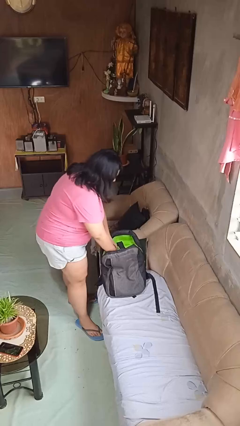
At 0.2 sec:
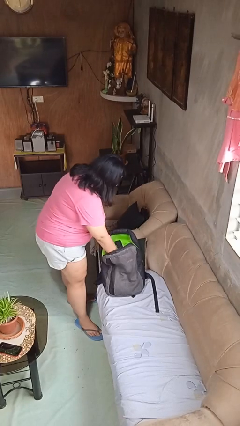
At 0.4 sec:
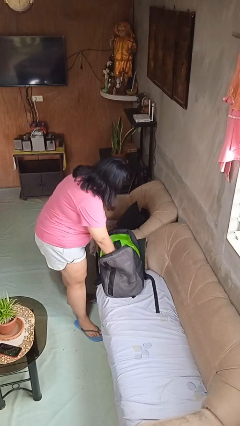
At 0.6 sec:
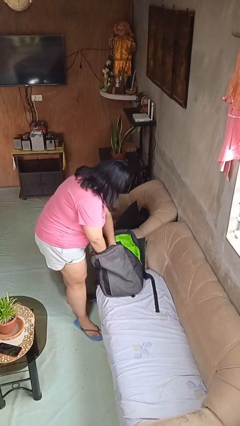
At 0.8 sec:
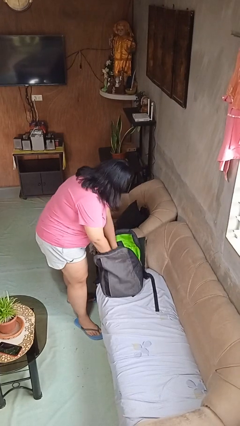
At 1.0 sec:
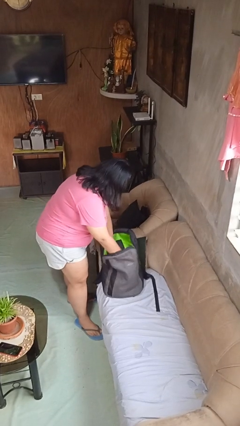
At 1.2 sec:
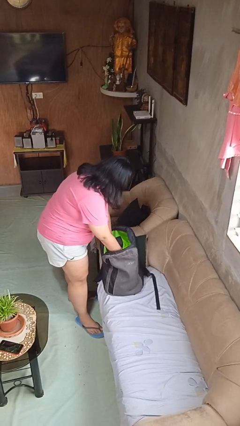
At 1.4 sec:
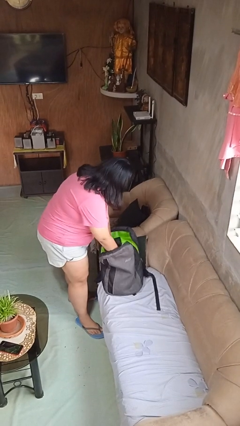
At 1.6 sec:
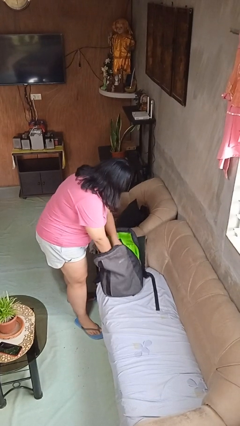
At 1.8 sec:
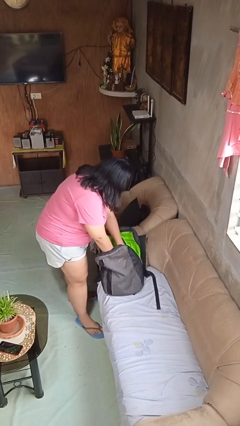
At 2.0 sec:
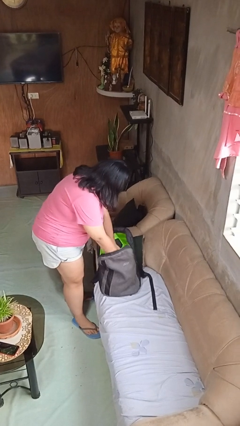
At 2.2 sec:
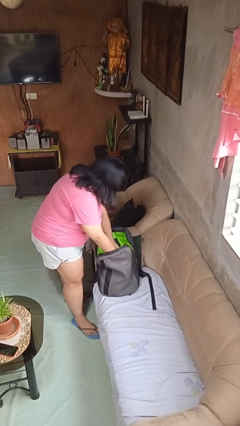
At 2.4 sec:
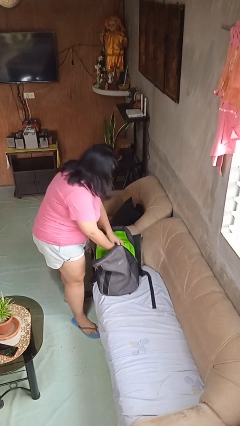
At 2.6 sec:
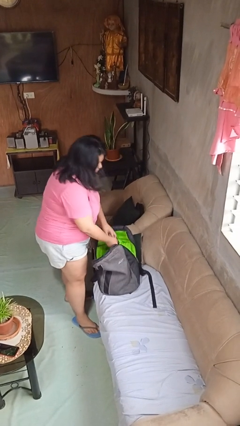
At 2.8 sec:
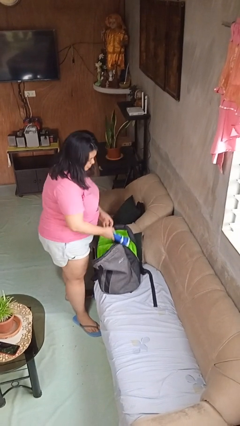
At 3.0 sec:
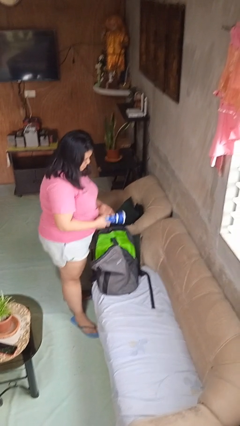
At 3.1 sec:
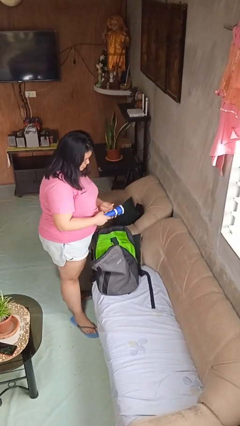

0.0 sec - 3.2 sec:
person searches in backpack

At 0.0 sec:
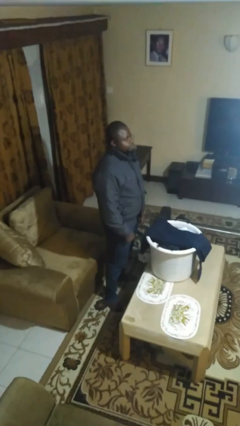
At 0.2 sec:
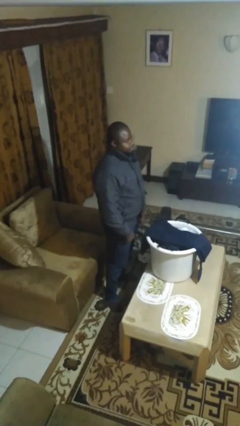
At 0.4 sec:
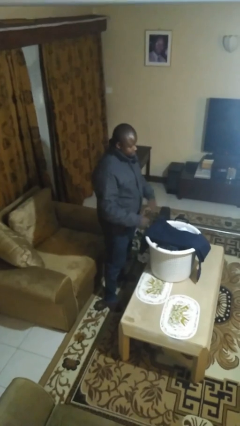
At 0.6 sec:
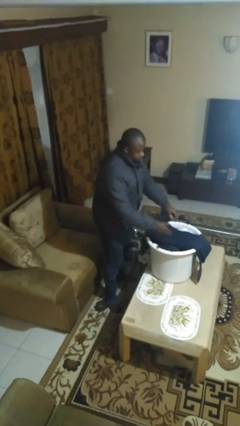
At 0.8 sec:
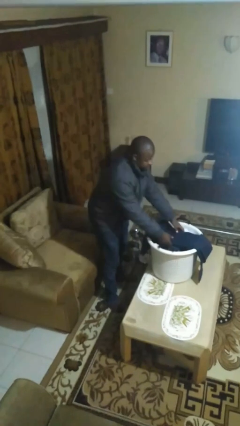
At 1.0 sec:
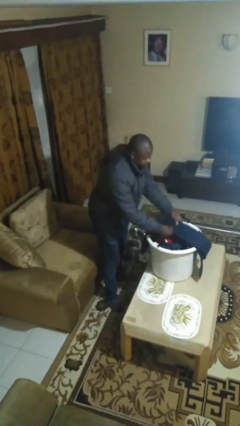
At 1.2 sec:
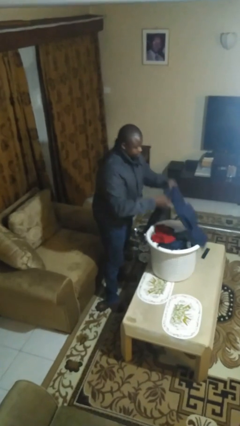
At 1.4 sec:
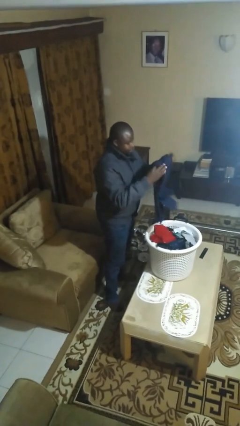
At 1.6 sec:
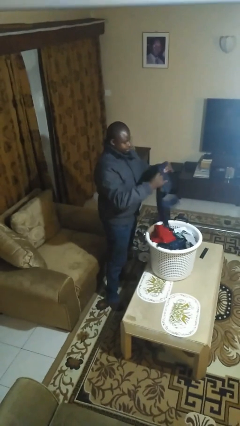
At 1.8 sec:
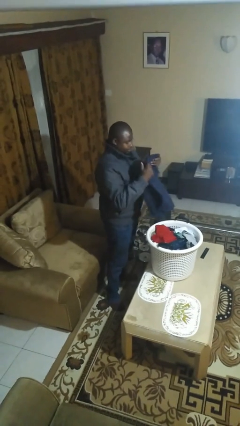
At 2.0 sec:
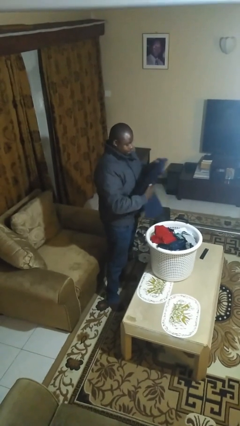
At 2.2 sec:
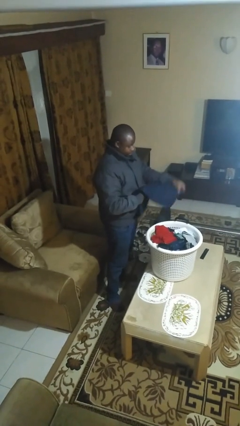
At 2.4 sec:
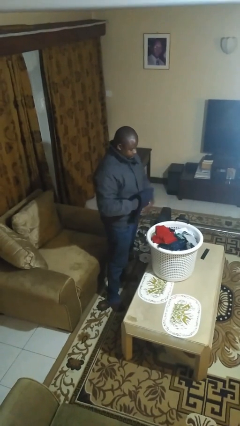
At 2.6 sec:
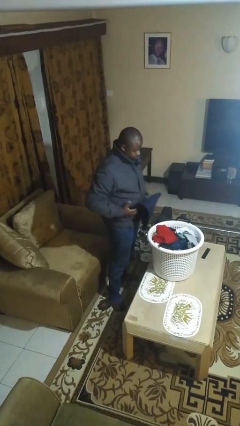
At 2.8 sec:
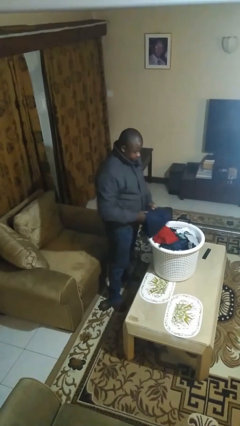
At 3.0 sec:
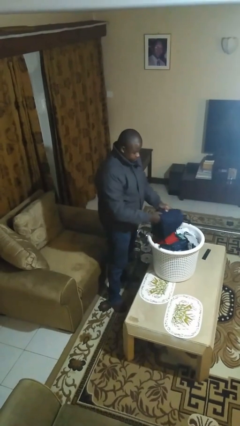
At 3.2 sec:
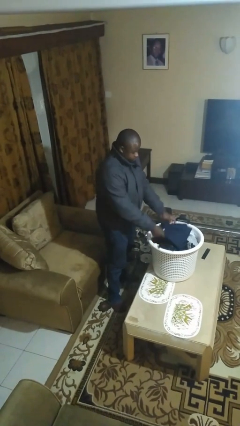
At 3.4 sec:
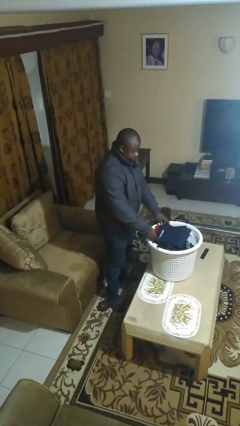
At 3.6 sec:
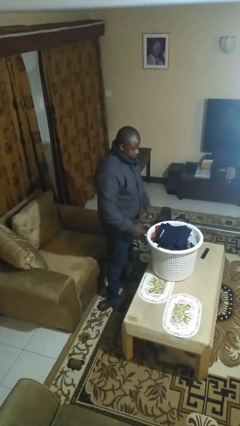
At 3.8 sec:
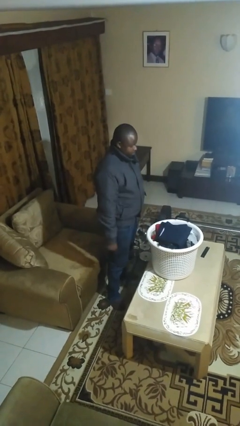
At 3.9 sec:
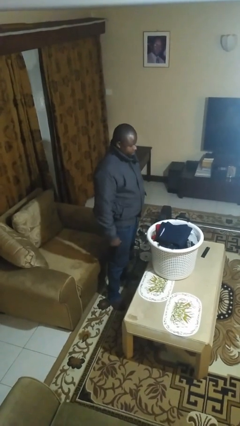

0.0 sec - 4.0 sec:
person folds pants

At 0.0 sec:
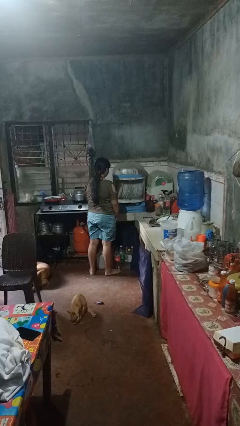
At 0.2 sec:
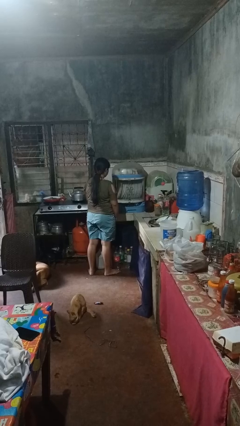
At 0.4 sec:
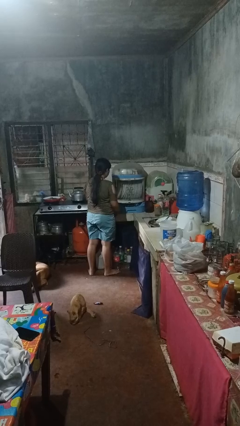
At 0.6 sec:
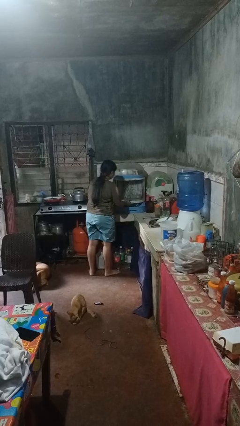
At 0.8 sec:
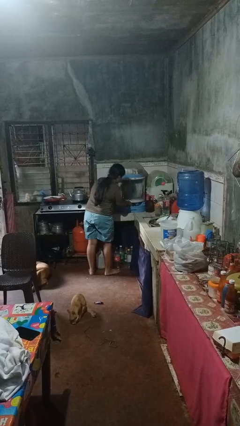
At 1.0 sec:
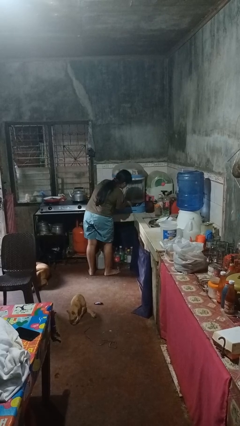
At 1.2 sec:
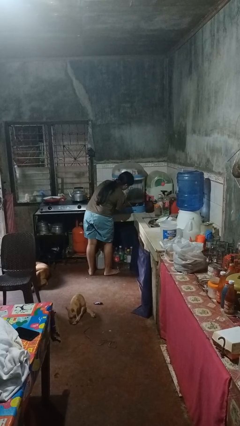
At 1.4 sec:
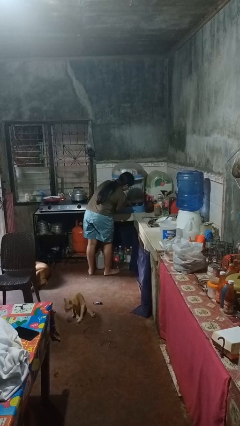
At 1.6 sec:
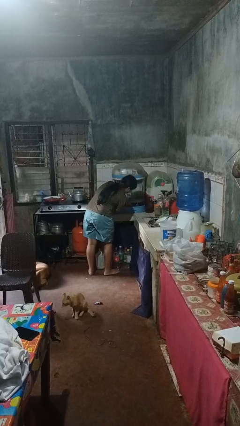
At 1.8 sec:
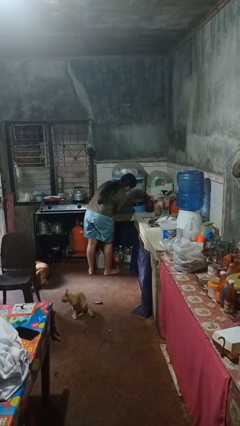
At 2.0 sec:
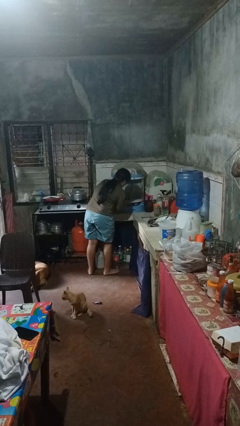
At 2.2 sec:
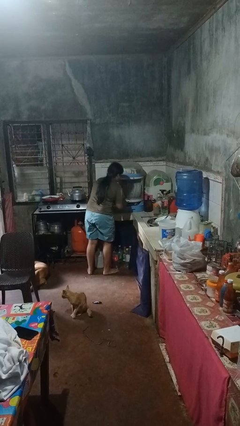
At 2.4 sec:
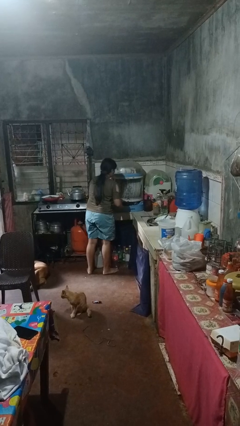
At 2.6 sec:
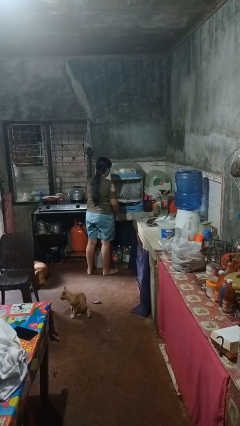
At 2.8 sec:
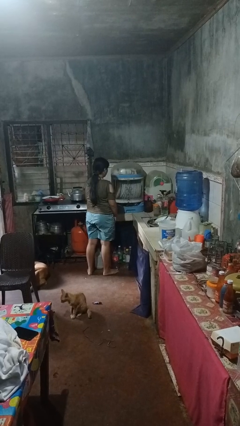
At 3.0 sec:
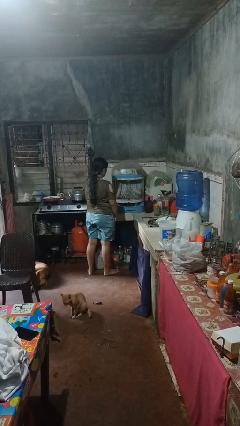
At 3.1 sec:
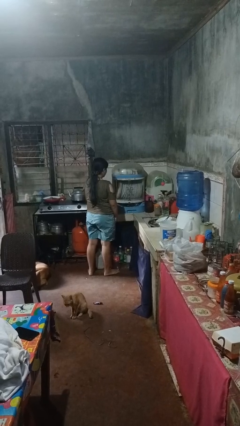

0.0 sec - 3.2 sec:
person searches in kitchen drawer

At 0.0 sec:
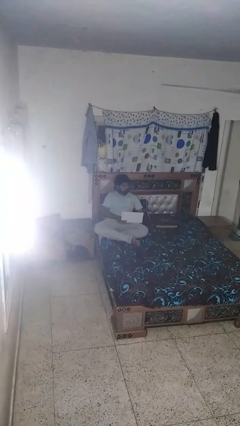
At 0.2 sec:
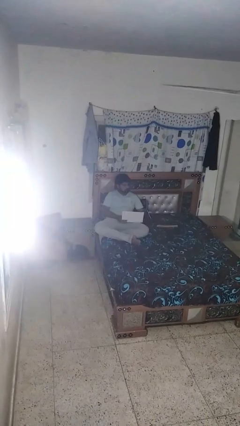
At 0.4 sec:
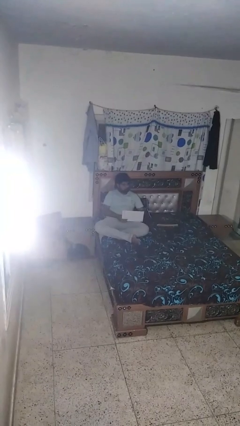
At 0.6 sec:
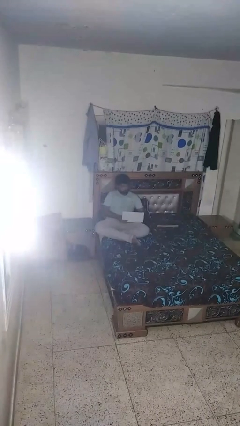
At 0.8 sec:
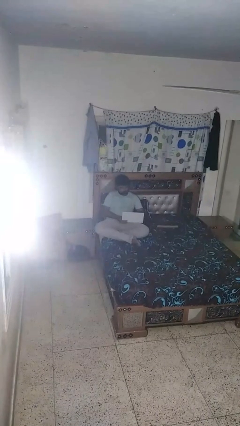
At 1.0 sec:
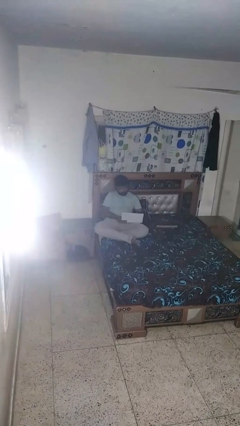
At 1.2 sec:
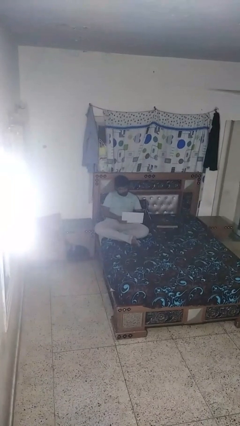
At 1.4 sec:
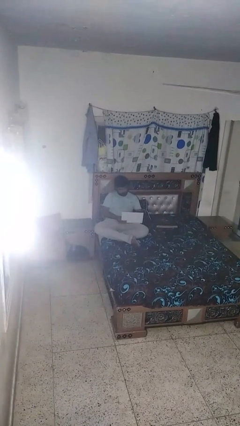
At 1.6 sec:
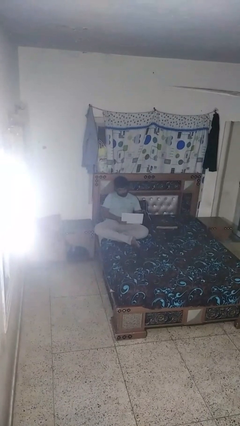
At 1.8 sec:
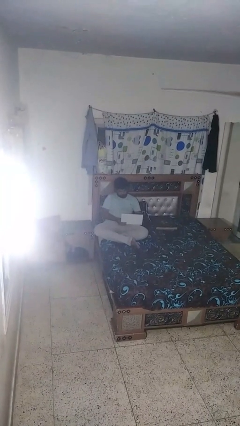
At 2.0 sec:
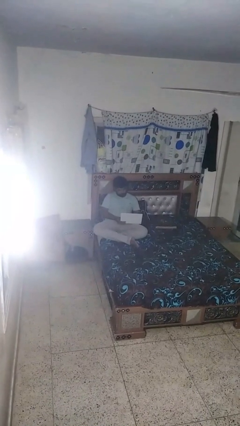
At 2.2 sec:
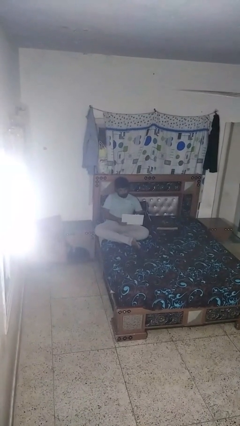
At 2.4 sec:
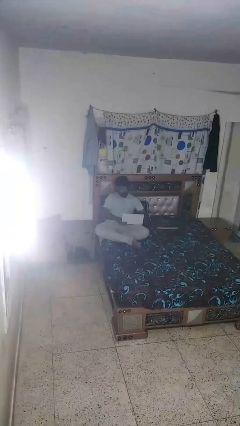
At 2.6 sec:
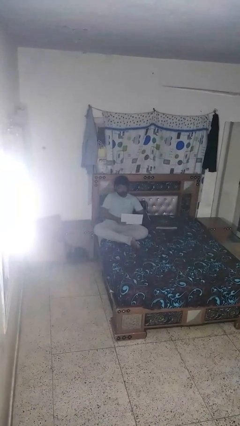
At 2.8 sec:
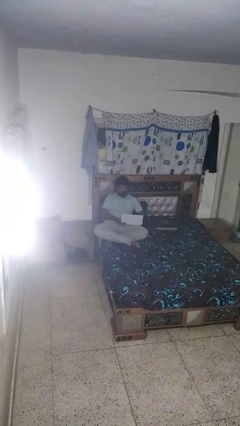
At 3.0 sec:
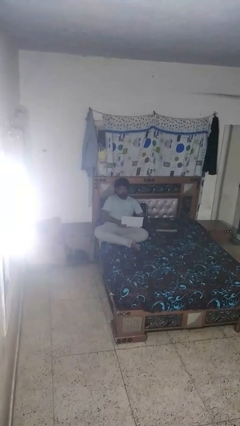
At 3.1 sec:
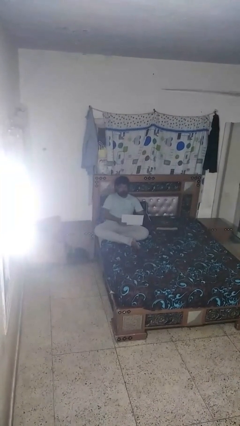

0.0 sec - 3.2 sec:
person interacts with tablet

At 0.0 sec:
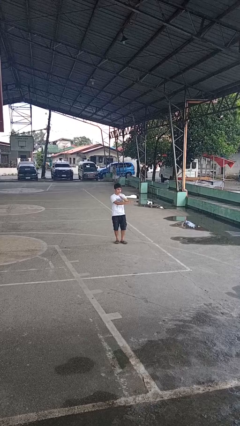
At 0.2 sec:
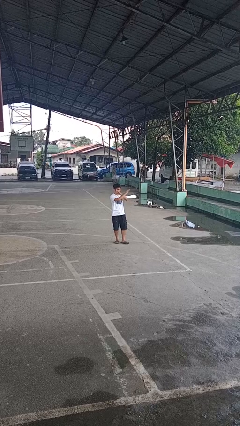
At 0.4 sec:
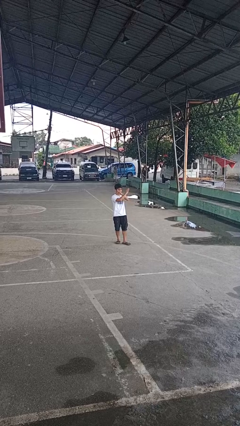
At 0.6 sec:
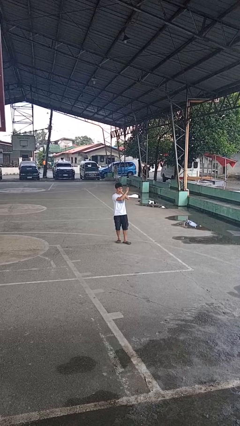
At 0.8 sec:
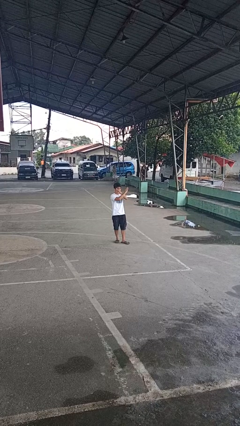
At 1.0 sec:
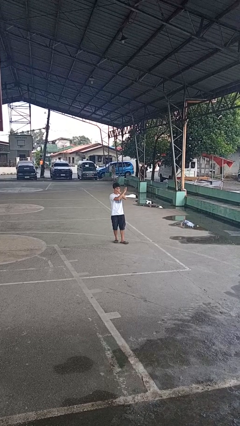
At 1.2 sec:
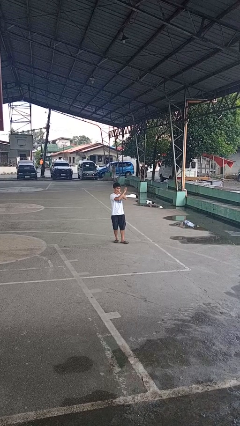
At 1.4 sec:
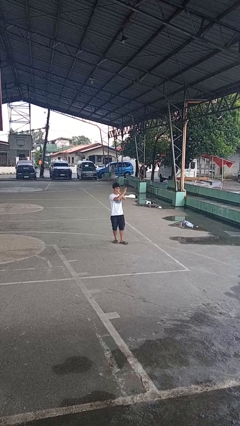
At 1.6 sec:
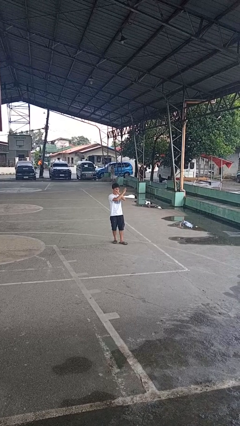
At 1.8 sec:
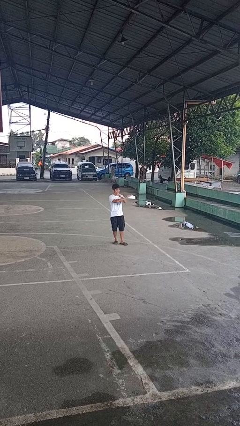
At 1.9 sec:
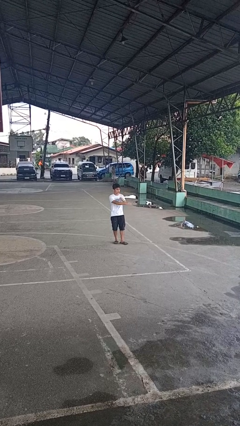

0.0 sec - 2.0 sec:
person gestures arms x

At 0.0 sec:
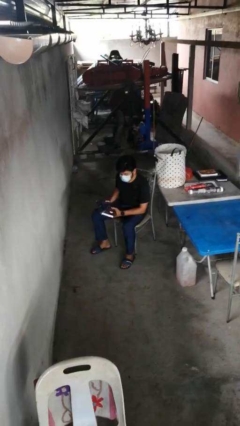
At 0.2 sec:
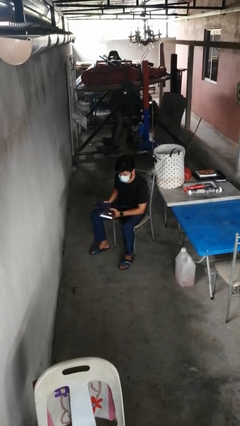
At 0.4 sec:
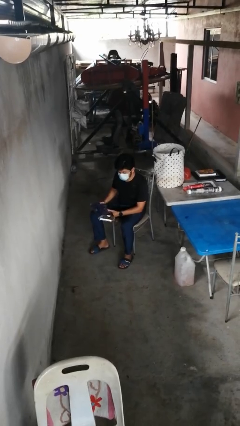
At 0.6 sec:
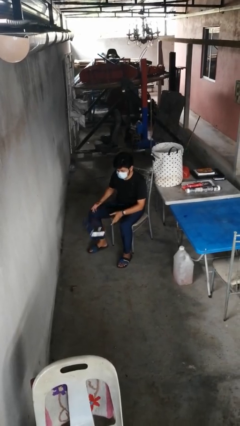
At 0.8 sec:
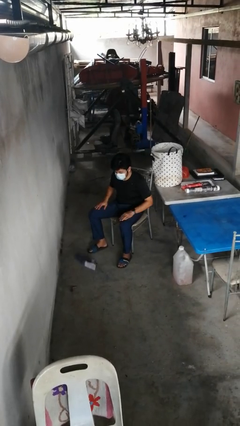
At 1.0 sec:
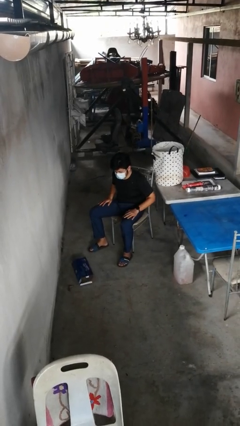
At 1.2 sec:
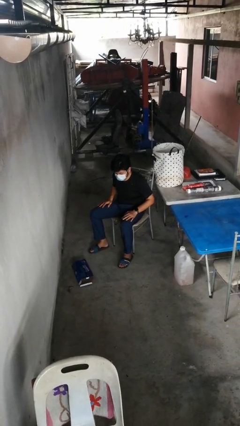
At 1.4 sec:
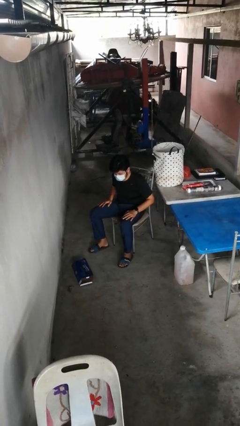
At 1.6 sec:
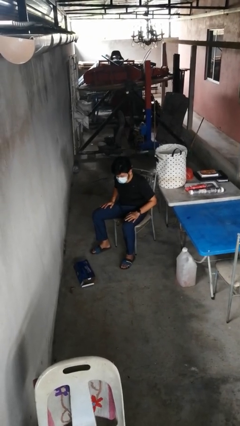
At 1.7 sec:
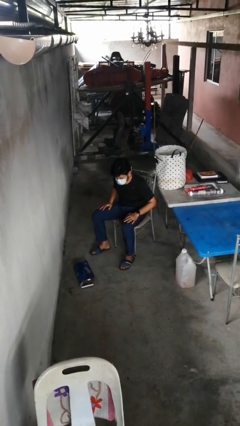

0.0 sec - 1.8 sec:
person drops object
